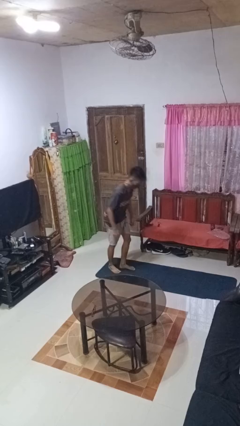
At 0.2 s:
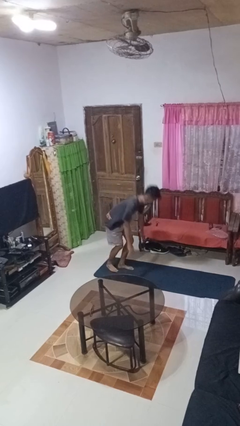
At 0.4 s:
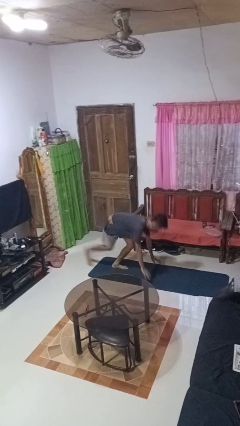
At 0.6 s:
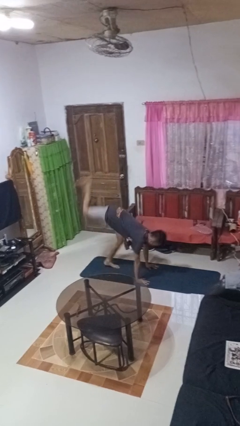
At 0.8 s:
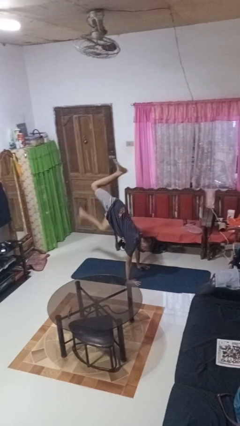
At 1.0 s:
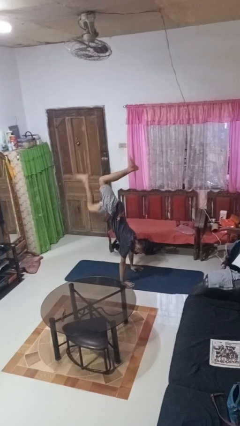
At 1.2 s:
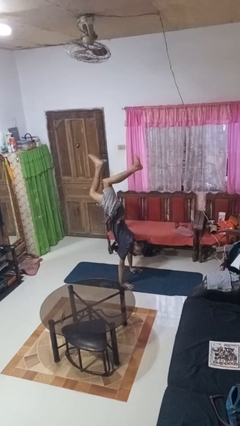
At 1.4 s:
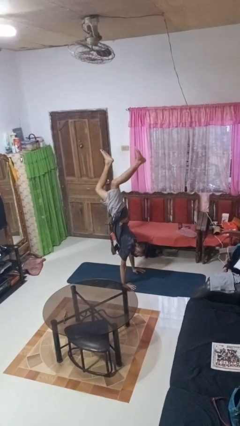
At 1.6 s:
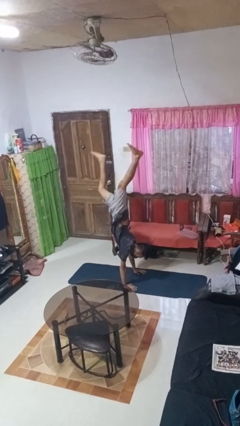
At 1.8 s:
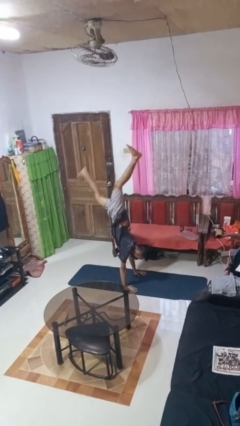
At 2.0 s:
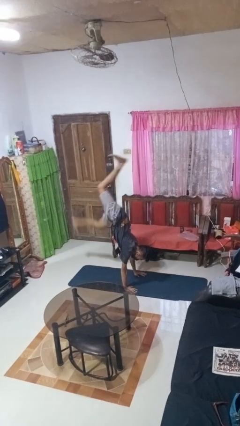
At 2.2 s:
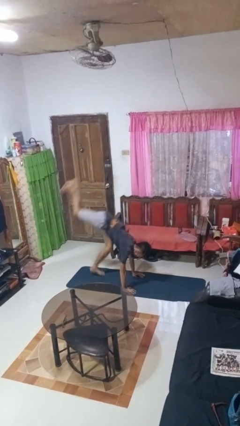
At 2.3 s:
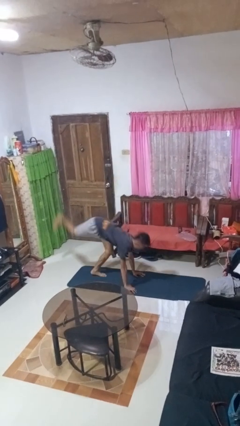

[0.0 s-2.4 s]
person handstand

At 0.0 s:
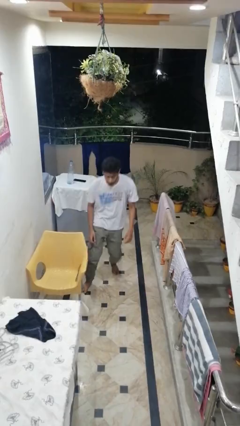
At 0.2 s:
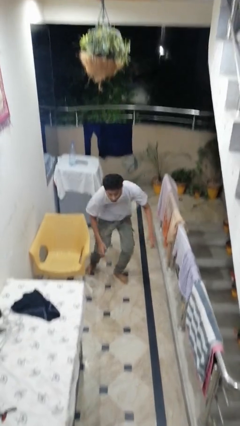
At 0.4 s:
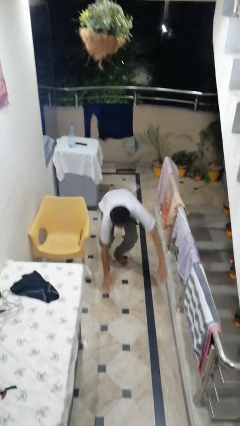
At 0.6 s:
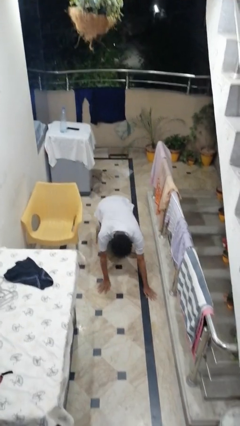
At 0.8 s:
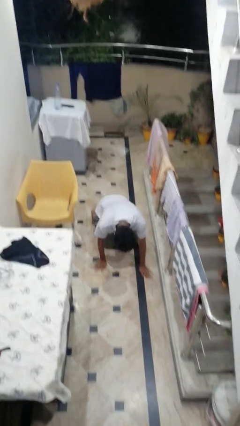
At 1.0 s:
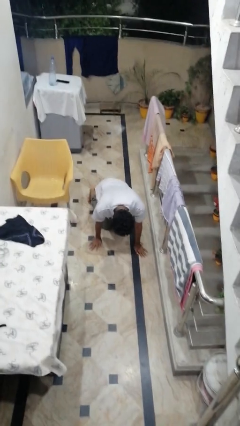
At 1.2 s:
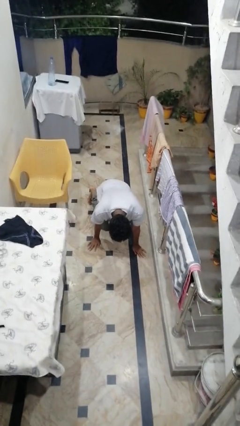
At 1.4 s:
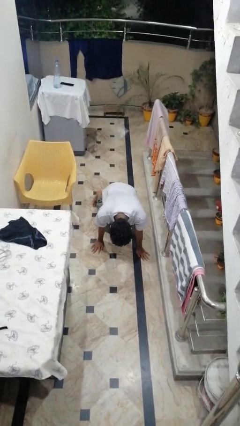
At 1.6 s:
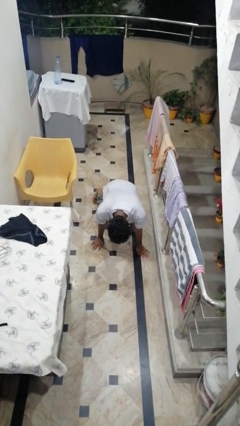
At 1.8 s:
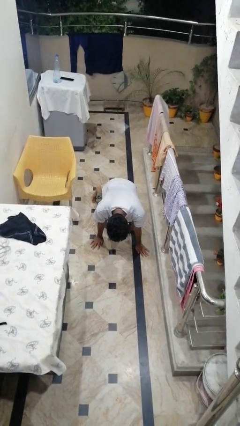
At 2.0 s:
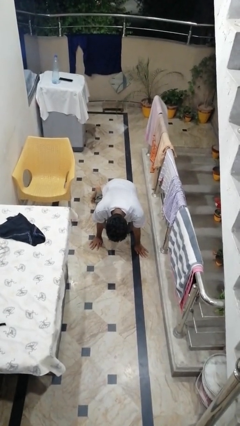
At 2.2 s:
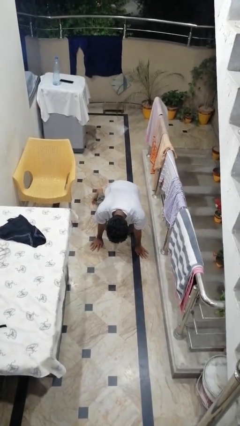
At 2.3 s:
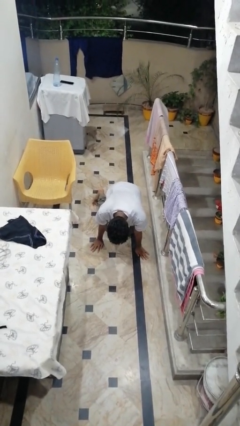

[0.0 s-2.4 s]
person trips on object on floor

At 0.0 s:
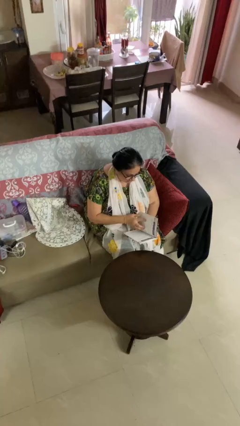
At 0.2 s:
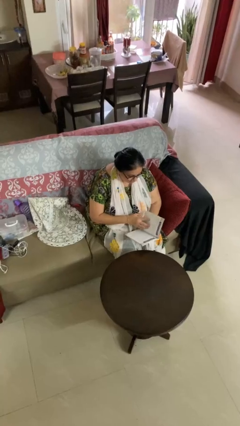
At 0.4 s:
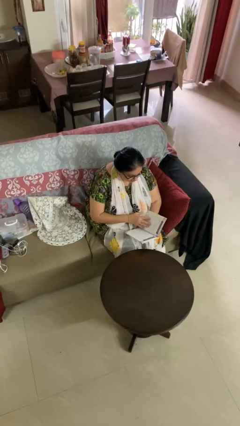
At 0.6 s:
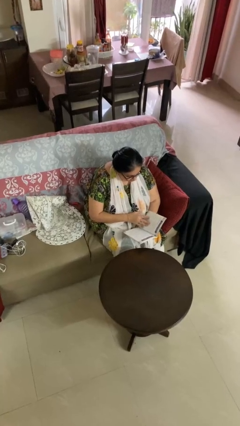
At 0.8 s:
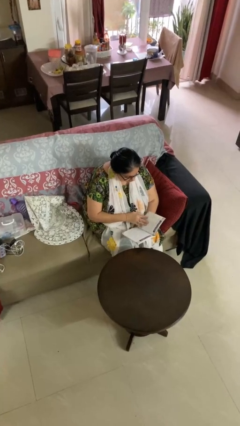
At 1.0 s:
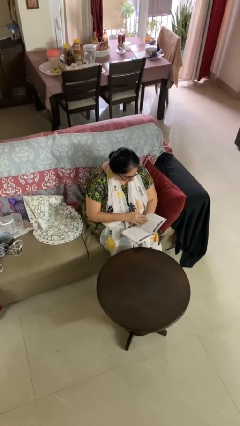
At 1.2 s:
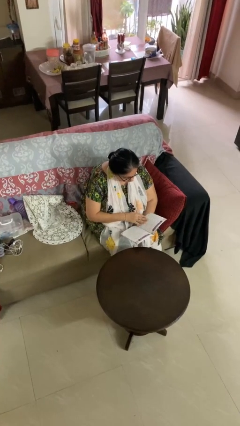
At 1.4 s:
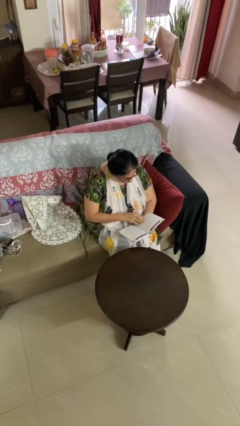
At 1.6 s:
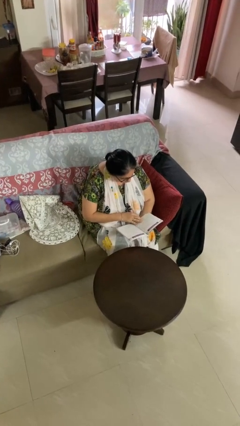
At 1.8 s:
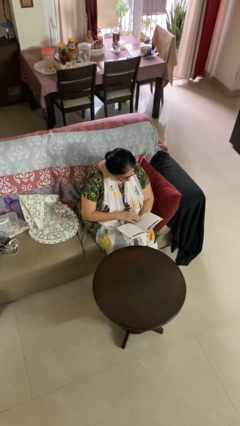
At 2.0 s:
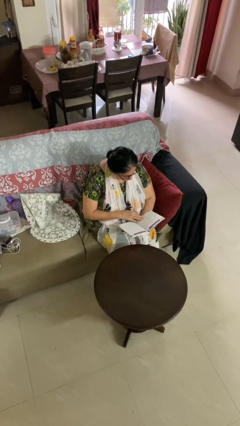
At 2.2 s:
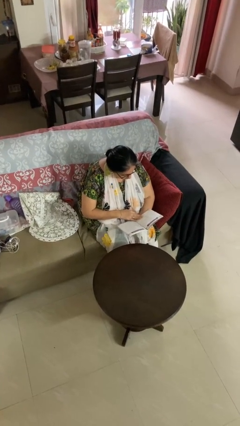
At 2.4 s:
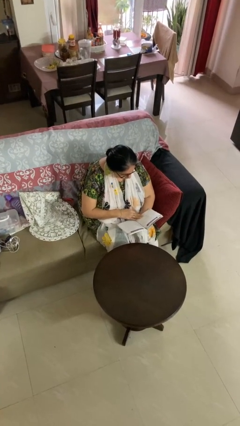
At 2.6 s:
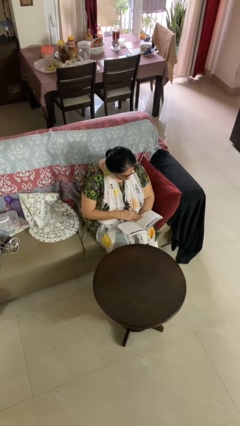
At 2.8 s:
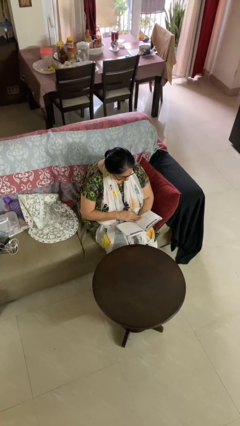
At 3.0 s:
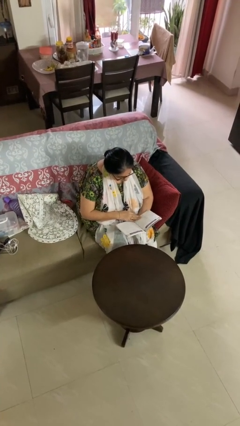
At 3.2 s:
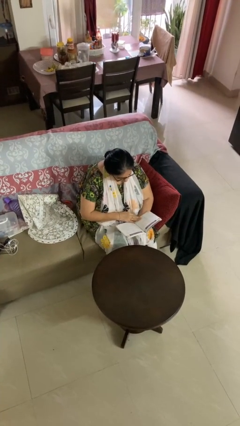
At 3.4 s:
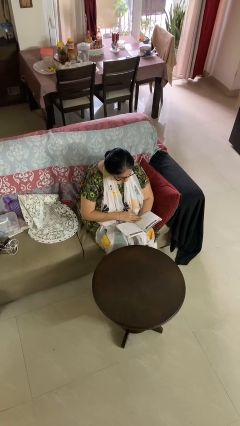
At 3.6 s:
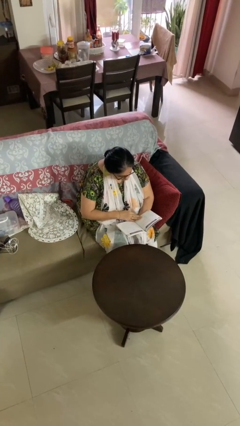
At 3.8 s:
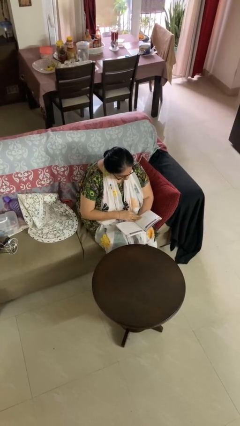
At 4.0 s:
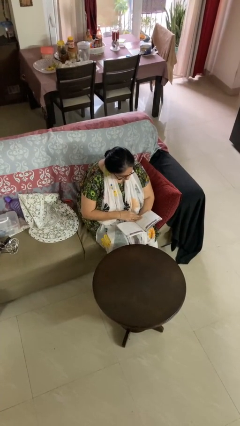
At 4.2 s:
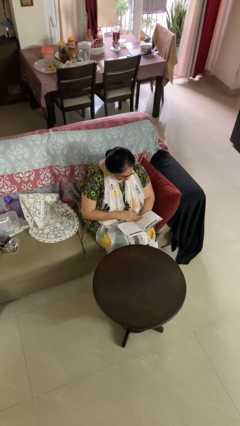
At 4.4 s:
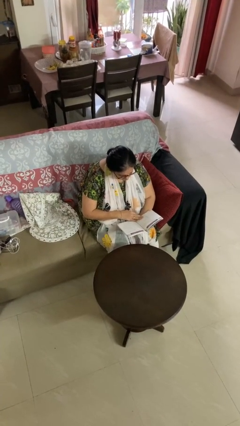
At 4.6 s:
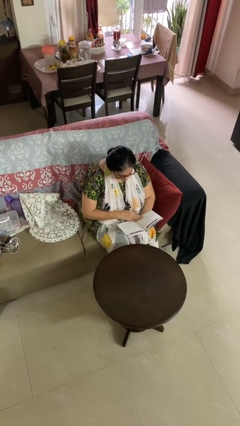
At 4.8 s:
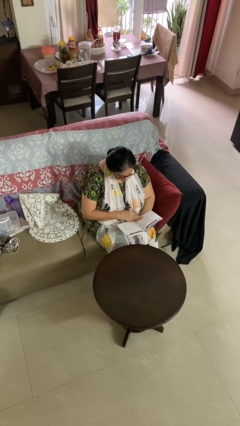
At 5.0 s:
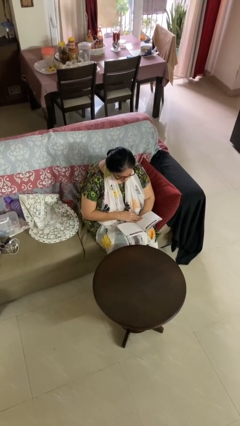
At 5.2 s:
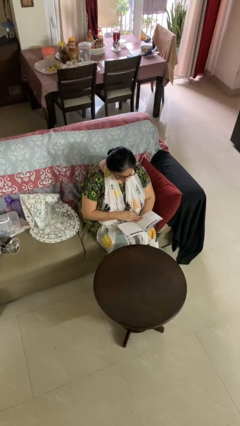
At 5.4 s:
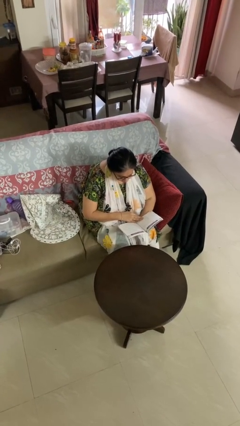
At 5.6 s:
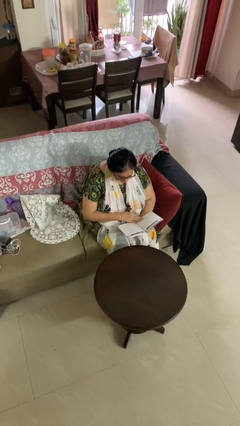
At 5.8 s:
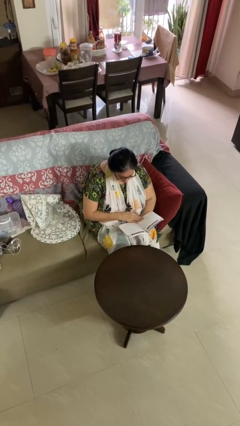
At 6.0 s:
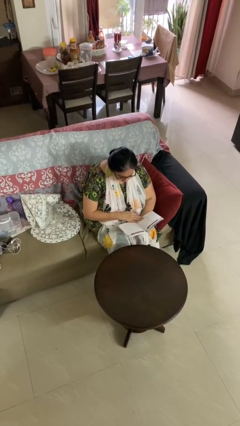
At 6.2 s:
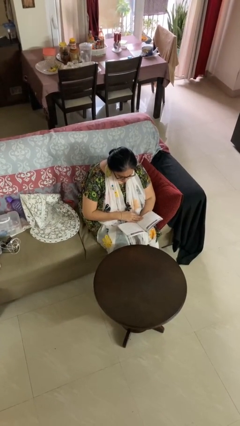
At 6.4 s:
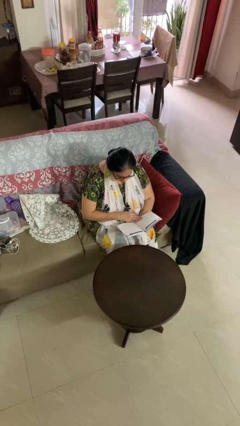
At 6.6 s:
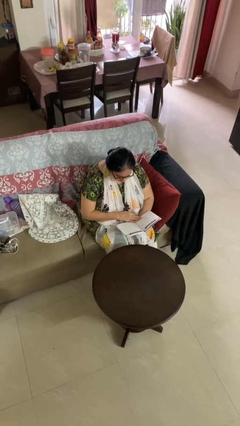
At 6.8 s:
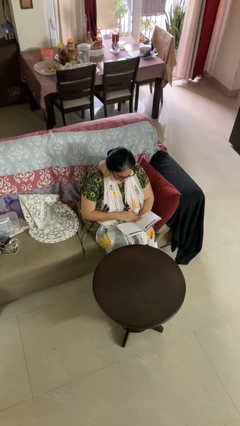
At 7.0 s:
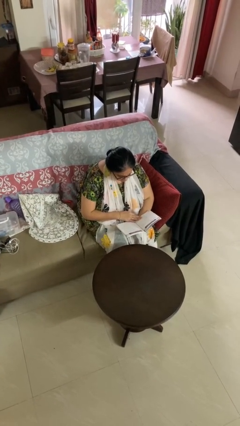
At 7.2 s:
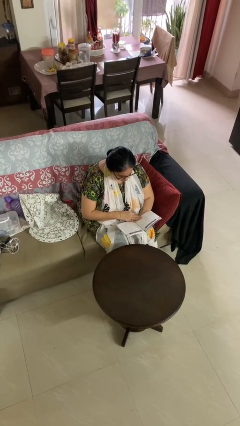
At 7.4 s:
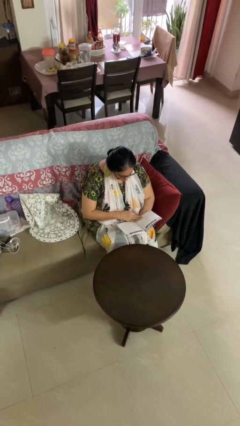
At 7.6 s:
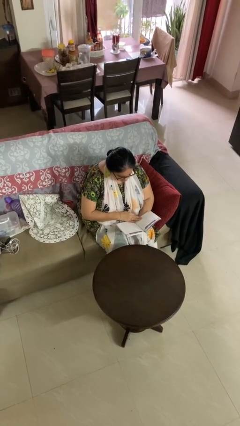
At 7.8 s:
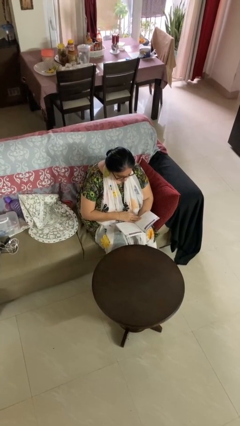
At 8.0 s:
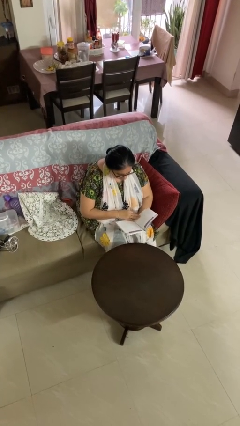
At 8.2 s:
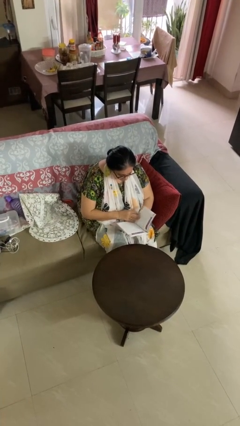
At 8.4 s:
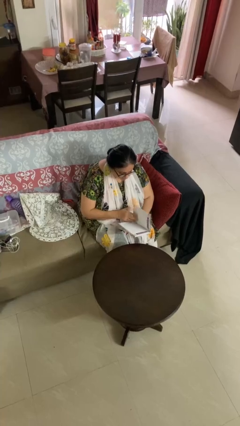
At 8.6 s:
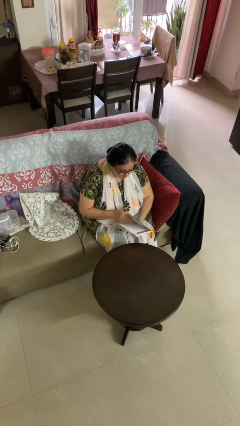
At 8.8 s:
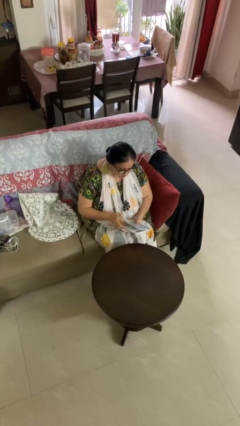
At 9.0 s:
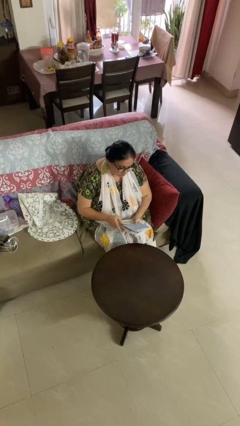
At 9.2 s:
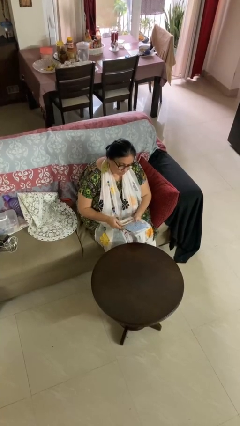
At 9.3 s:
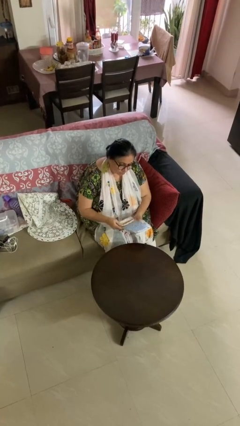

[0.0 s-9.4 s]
person reads document

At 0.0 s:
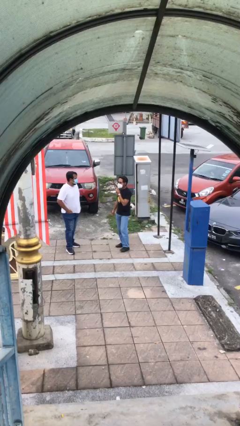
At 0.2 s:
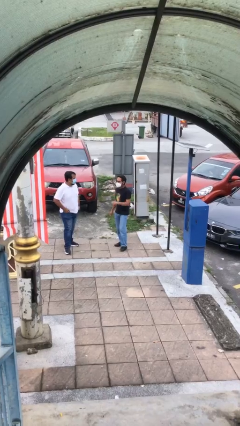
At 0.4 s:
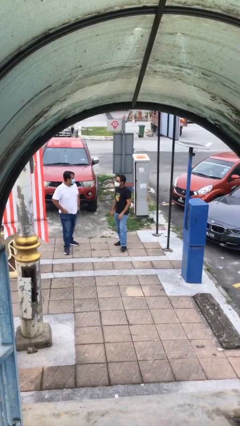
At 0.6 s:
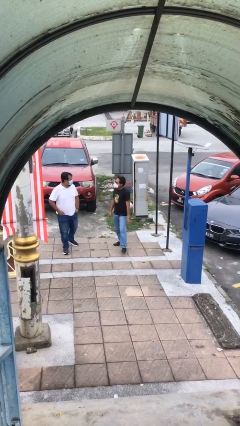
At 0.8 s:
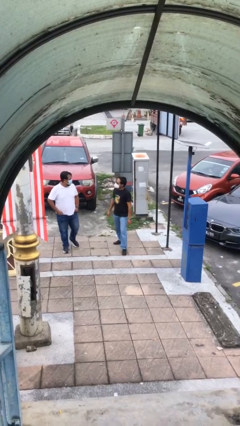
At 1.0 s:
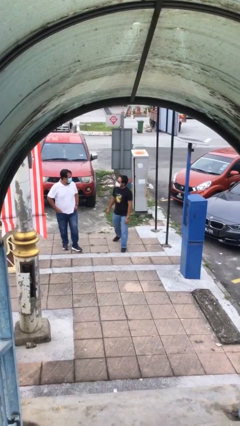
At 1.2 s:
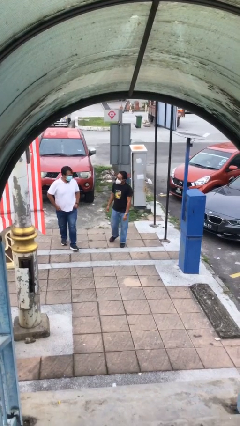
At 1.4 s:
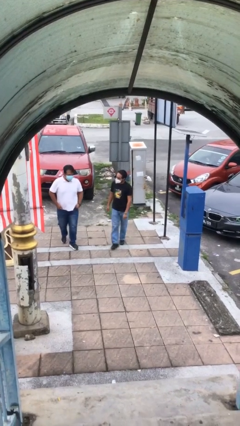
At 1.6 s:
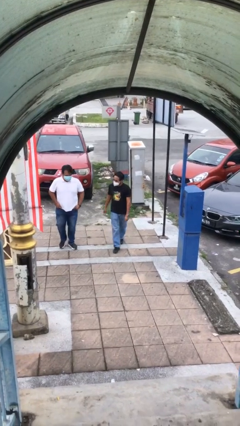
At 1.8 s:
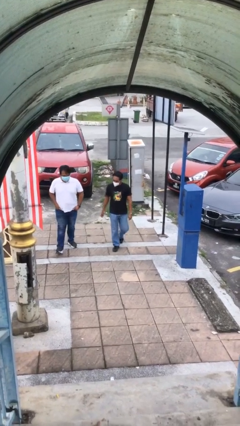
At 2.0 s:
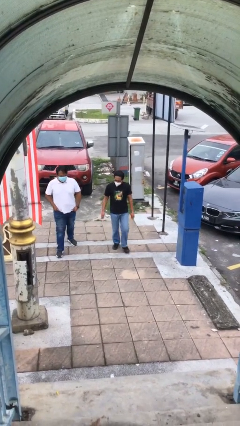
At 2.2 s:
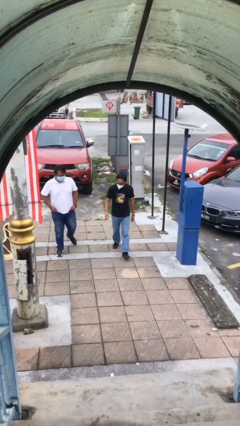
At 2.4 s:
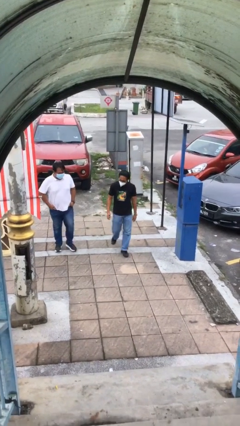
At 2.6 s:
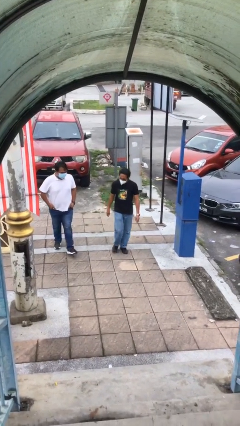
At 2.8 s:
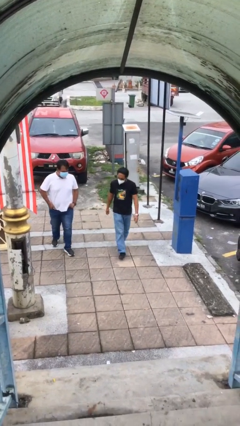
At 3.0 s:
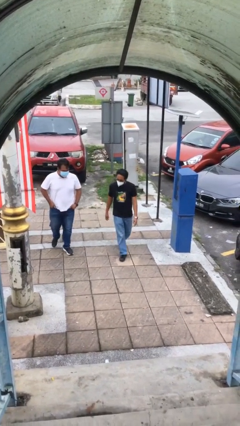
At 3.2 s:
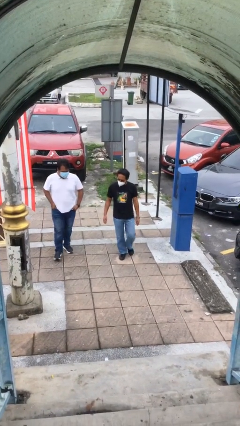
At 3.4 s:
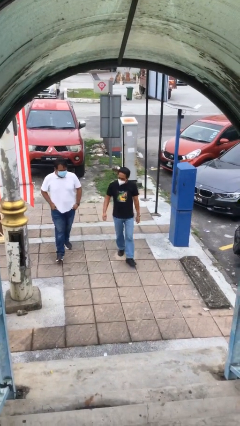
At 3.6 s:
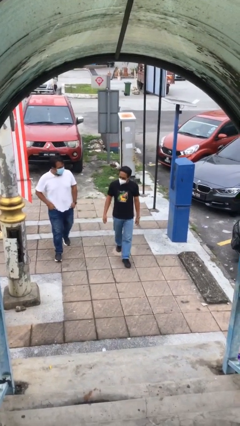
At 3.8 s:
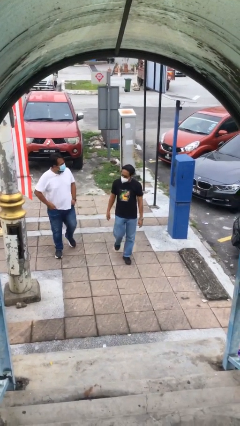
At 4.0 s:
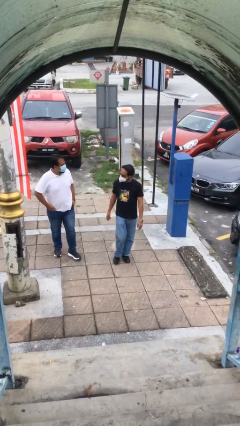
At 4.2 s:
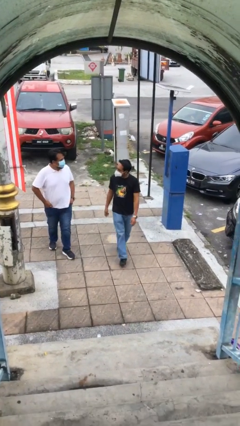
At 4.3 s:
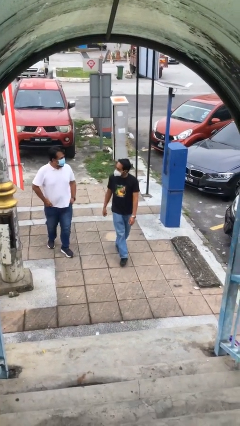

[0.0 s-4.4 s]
person talks to person
